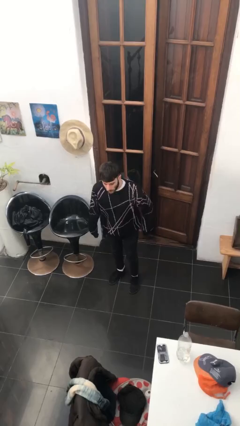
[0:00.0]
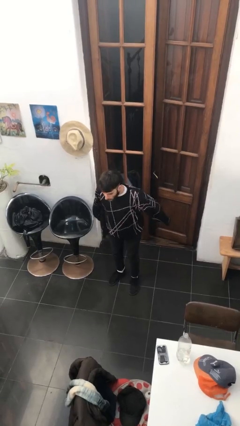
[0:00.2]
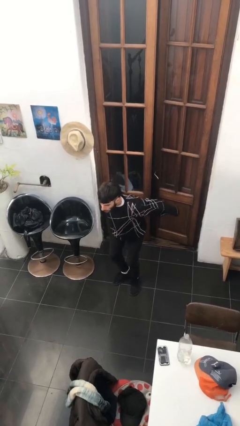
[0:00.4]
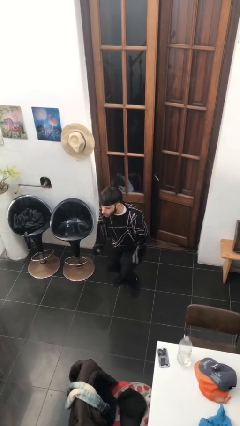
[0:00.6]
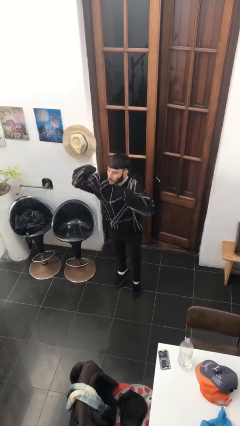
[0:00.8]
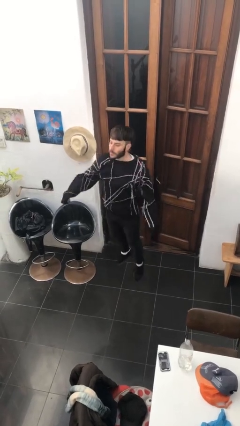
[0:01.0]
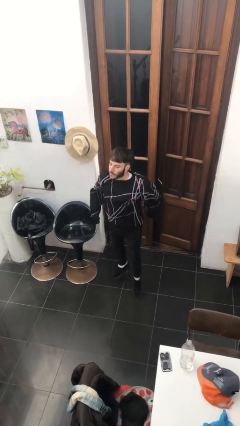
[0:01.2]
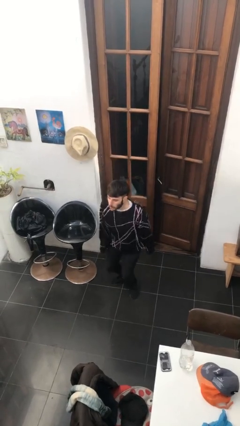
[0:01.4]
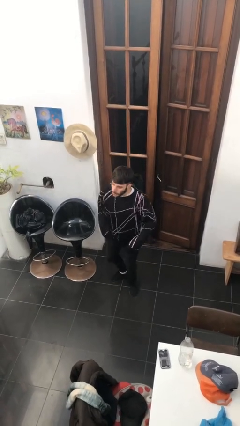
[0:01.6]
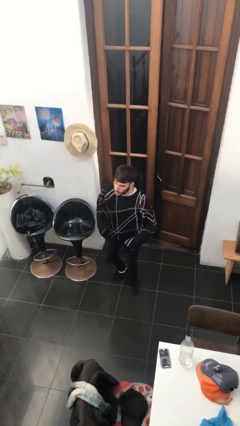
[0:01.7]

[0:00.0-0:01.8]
person jumps

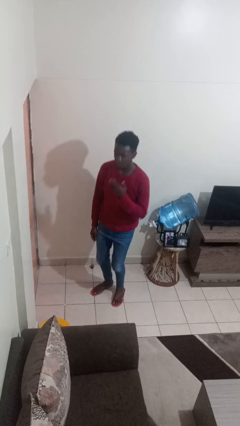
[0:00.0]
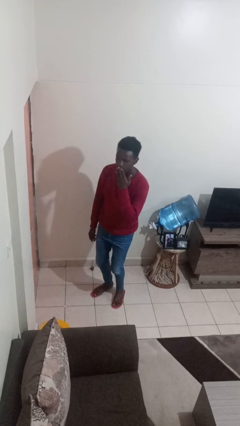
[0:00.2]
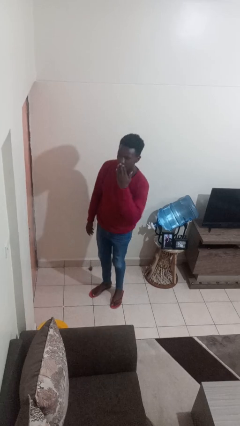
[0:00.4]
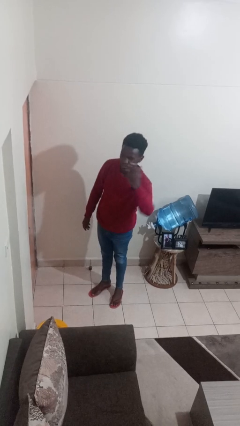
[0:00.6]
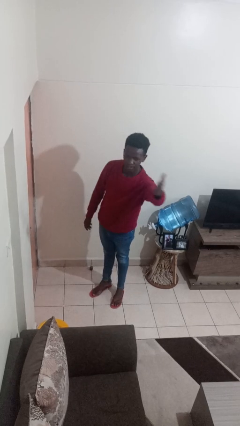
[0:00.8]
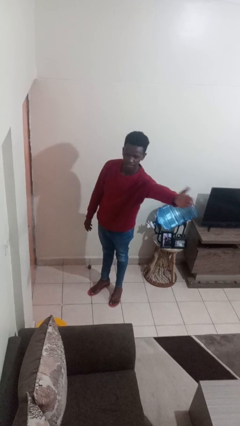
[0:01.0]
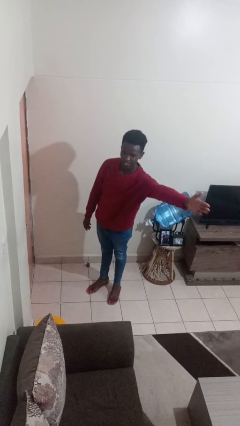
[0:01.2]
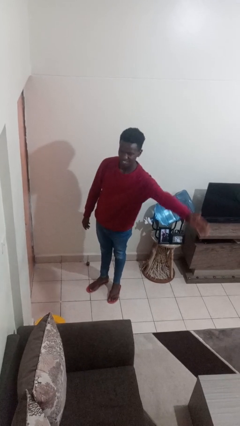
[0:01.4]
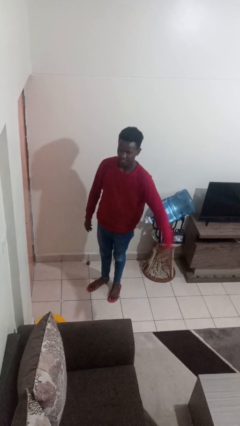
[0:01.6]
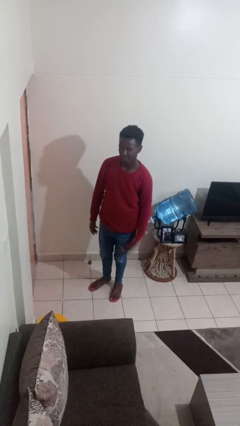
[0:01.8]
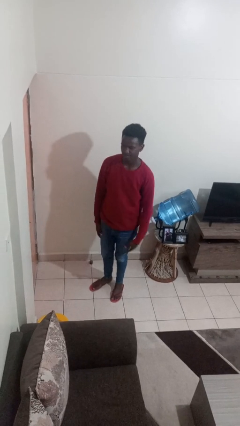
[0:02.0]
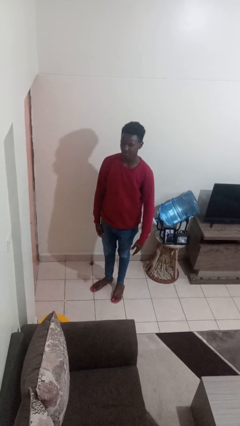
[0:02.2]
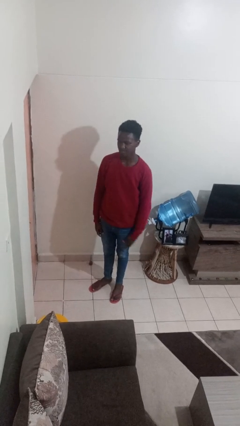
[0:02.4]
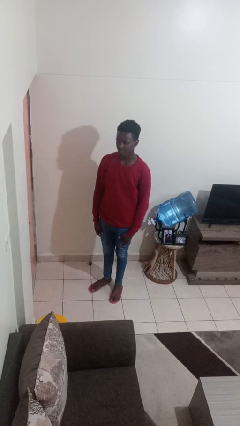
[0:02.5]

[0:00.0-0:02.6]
person gestures blow kiss

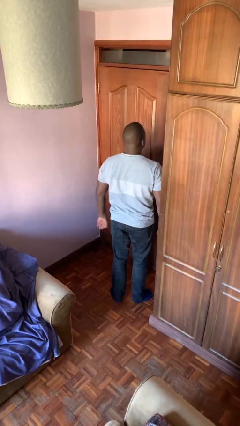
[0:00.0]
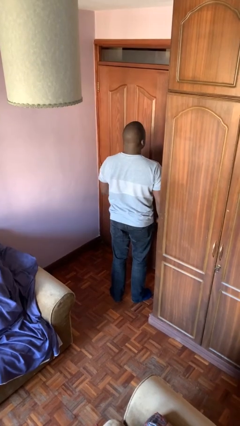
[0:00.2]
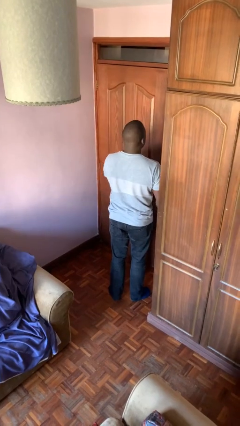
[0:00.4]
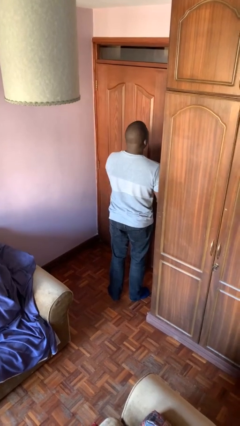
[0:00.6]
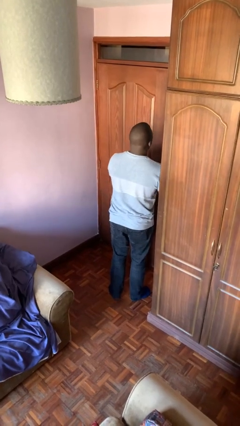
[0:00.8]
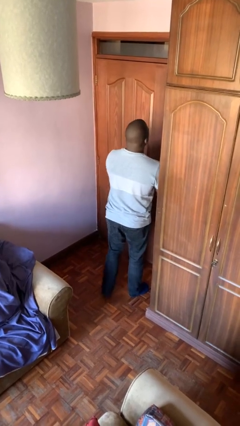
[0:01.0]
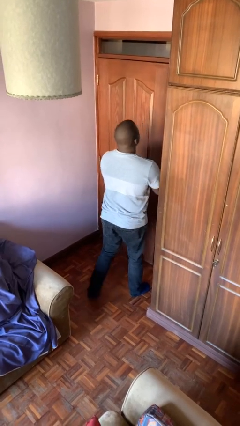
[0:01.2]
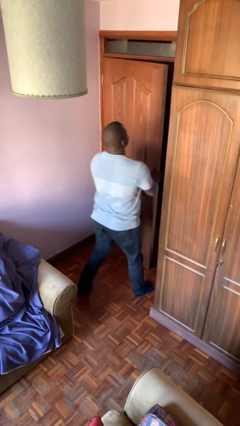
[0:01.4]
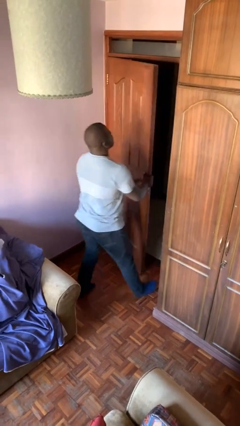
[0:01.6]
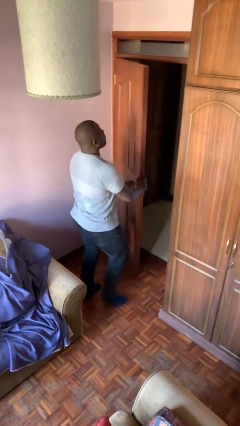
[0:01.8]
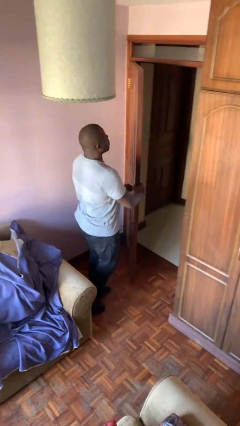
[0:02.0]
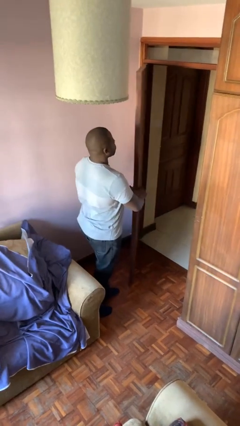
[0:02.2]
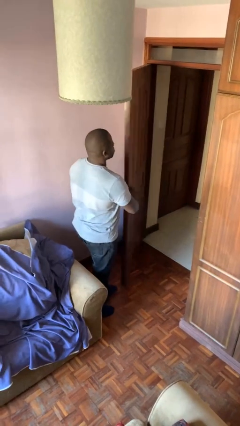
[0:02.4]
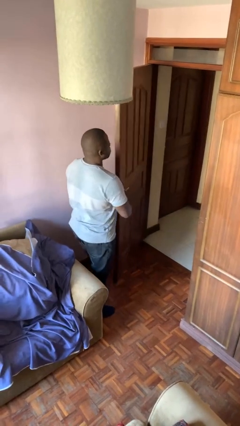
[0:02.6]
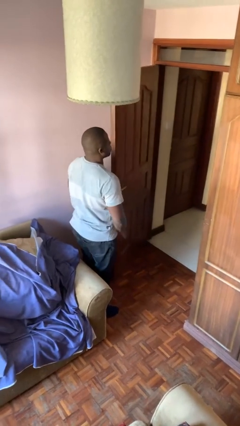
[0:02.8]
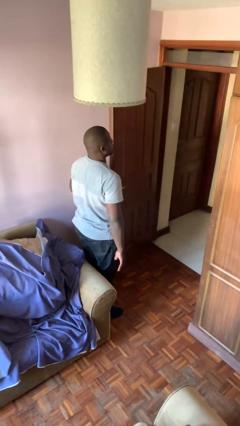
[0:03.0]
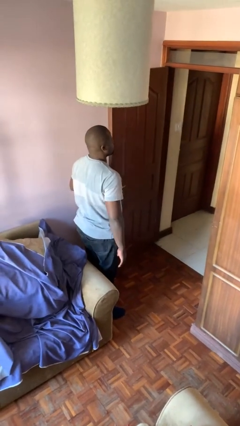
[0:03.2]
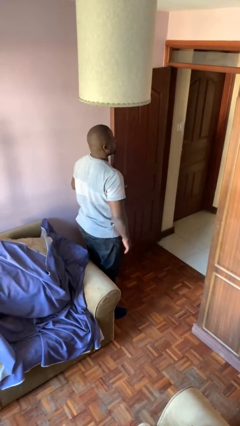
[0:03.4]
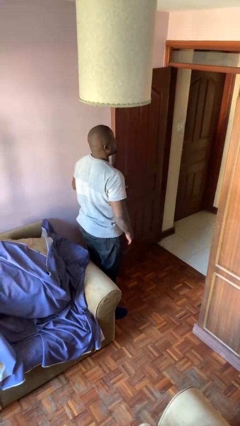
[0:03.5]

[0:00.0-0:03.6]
person opens facility door

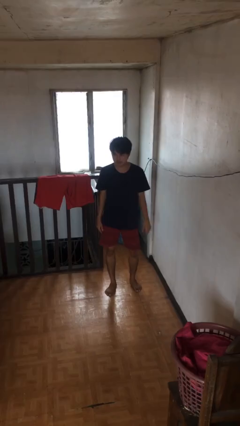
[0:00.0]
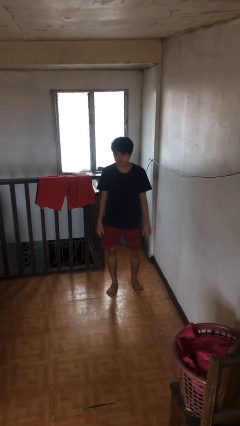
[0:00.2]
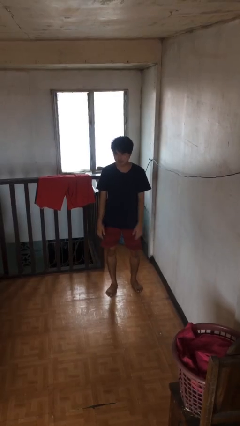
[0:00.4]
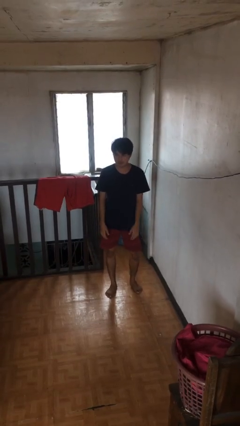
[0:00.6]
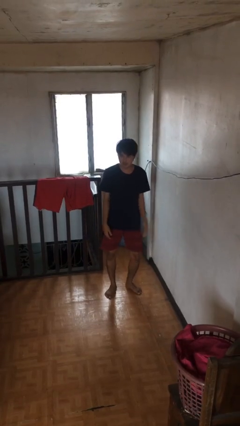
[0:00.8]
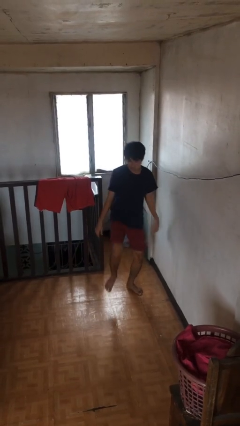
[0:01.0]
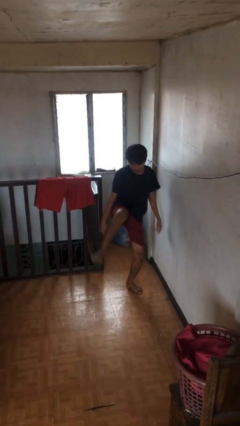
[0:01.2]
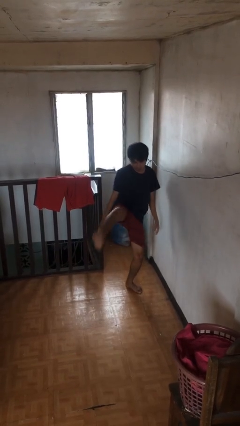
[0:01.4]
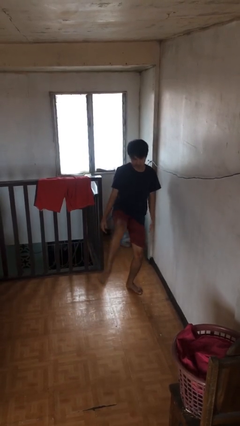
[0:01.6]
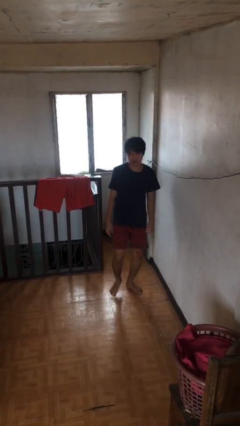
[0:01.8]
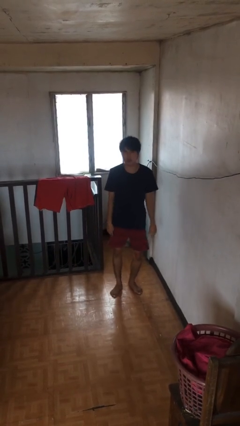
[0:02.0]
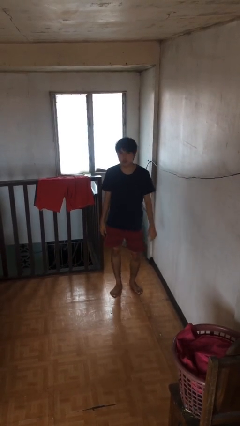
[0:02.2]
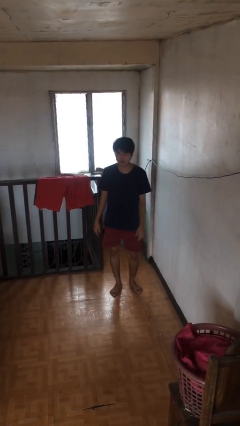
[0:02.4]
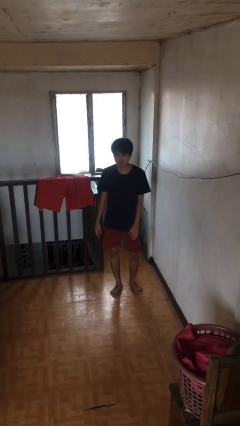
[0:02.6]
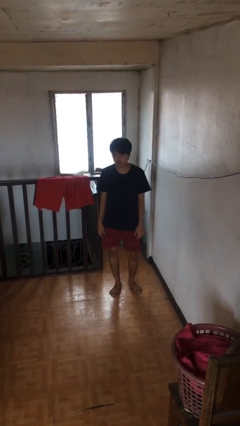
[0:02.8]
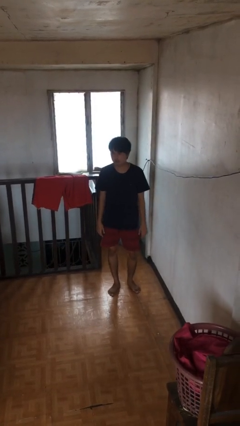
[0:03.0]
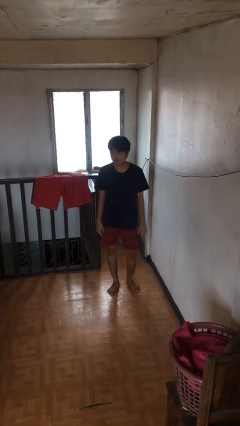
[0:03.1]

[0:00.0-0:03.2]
person karate kicks

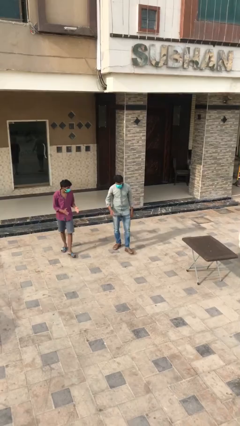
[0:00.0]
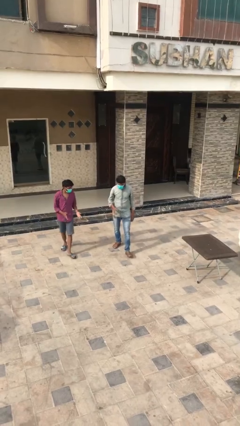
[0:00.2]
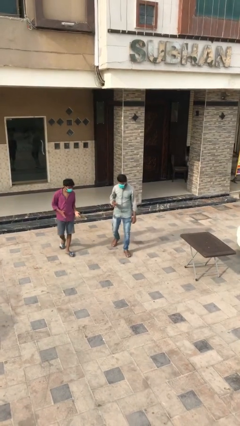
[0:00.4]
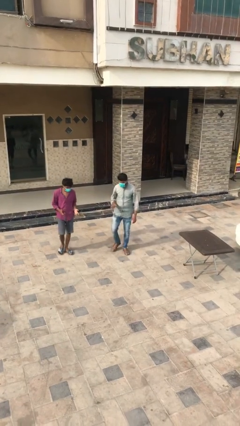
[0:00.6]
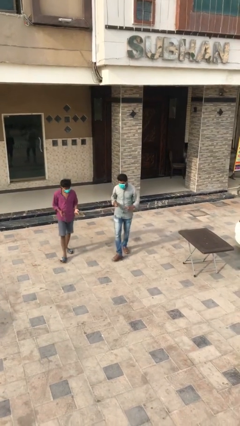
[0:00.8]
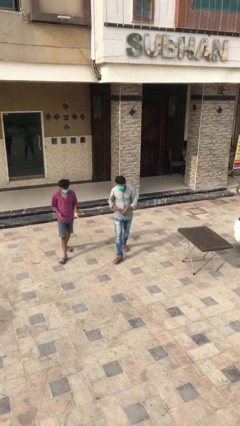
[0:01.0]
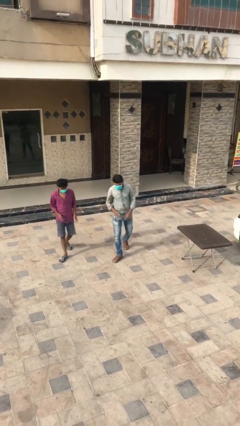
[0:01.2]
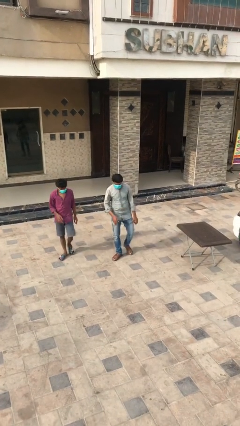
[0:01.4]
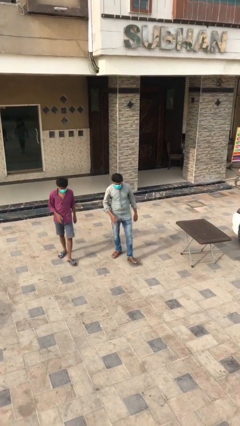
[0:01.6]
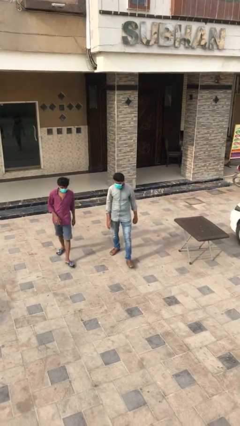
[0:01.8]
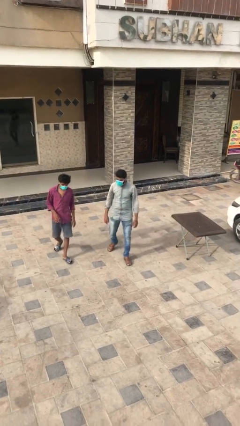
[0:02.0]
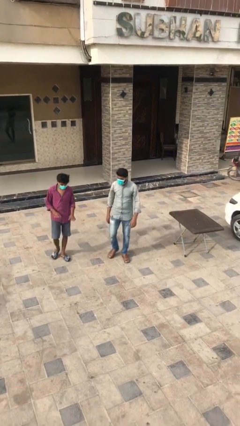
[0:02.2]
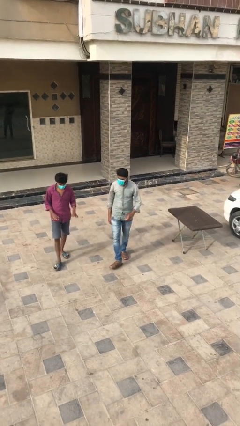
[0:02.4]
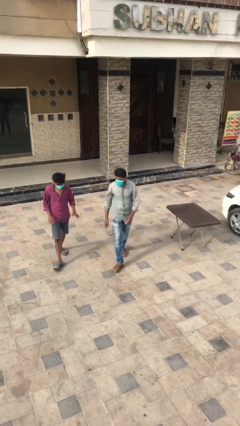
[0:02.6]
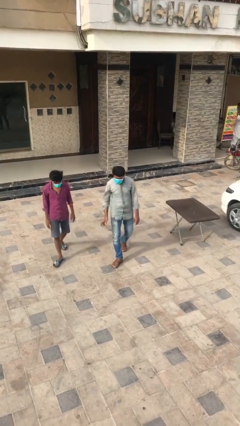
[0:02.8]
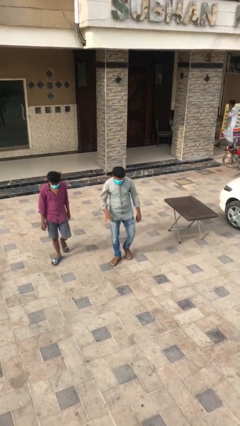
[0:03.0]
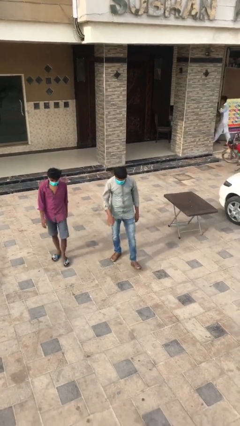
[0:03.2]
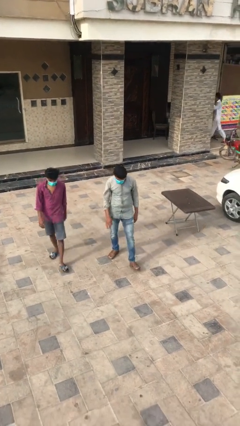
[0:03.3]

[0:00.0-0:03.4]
person talks to person

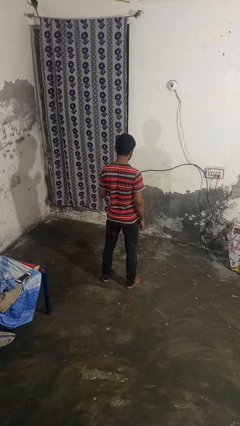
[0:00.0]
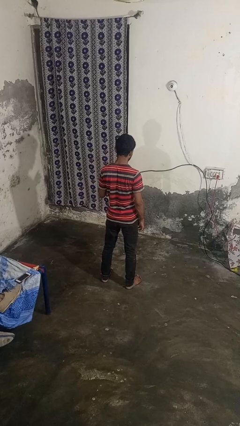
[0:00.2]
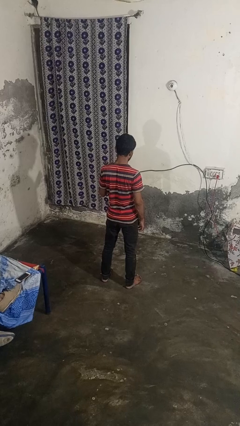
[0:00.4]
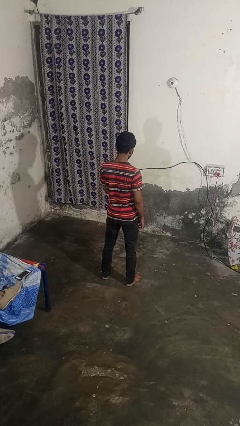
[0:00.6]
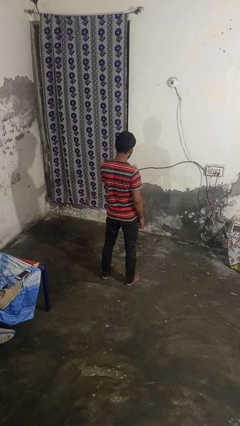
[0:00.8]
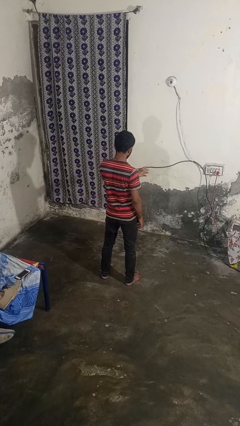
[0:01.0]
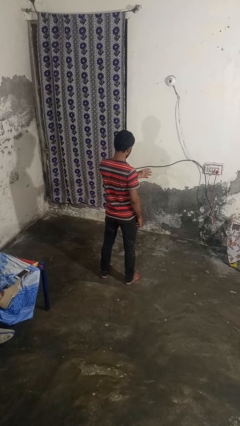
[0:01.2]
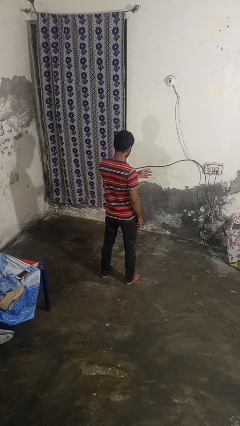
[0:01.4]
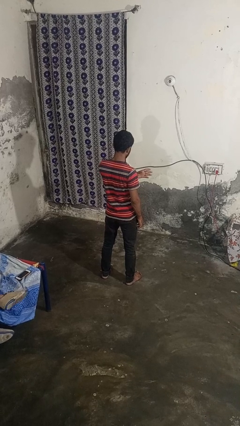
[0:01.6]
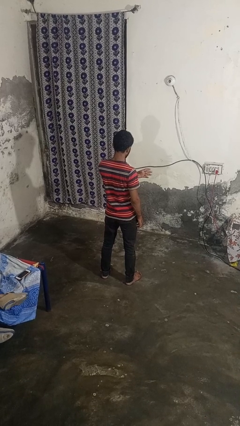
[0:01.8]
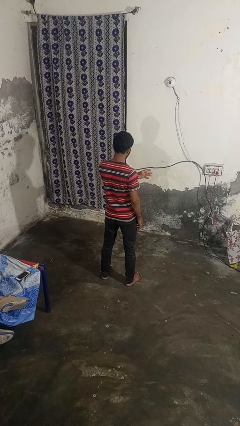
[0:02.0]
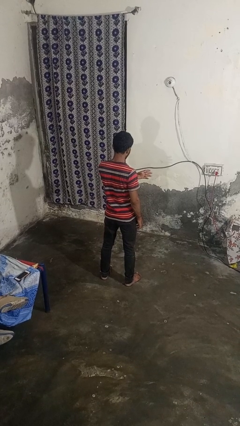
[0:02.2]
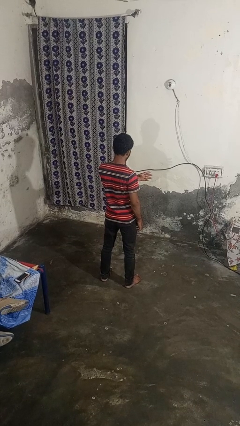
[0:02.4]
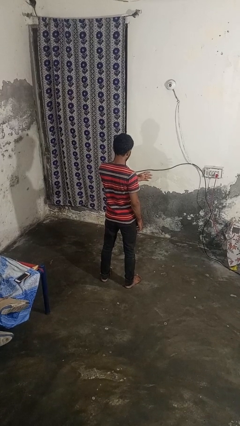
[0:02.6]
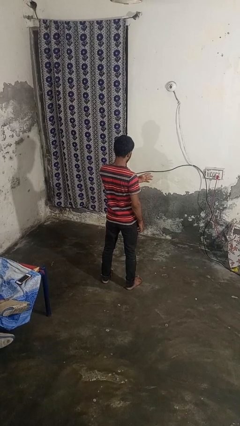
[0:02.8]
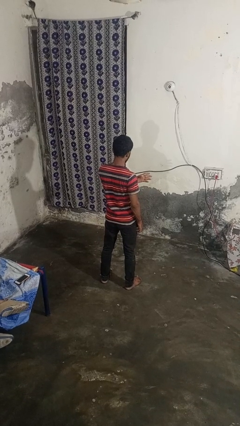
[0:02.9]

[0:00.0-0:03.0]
person gestures swipe right
